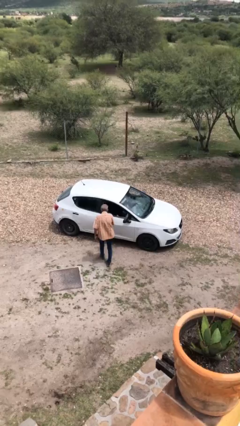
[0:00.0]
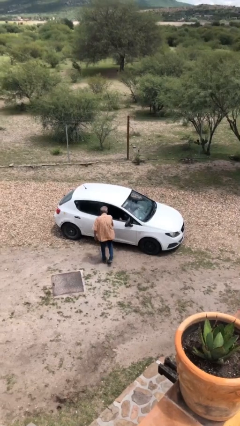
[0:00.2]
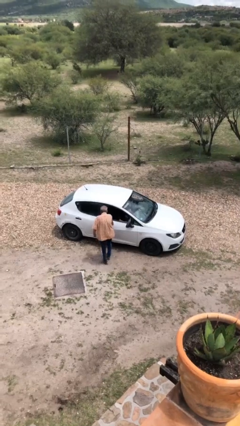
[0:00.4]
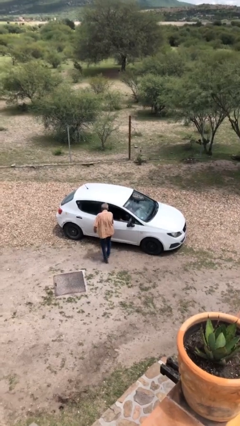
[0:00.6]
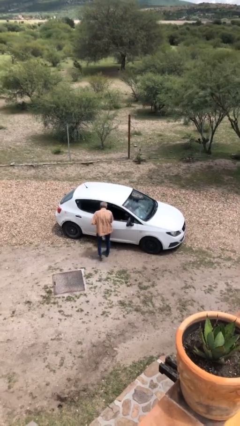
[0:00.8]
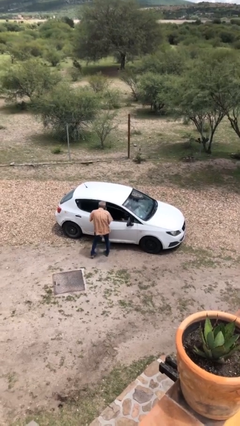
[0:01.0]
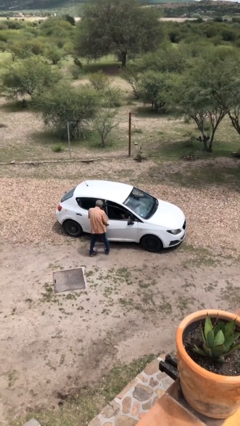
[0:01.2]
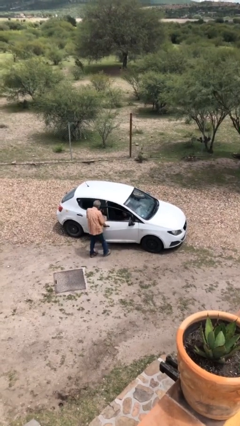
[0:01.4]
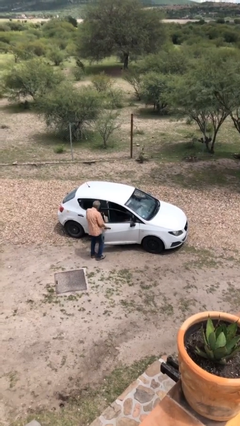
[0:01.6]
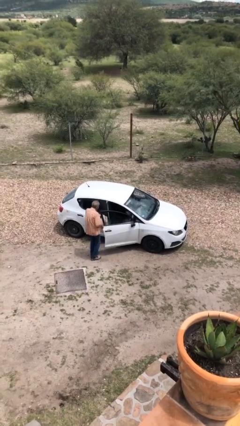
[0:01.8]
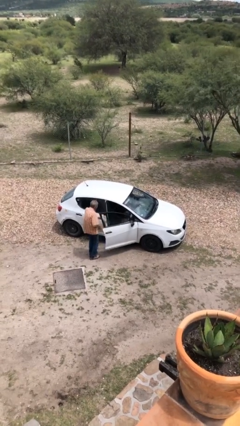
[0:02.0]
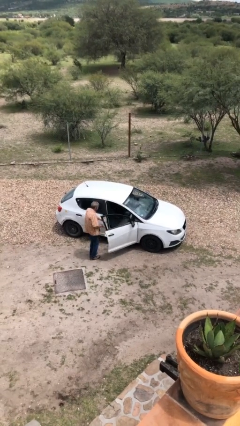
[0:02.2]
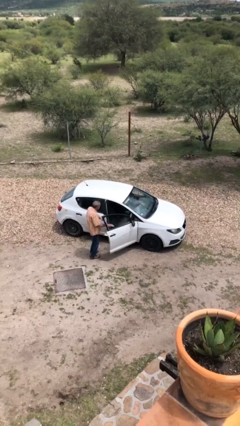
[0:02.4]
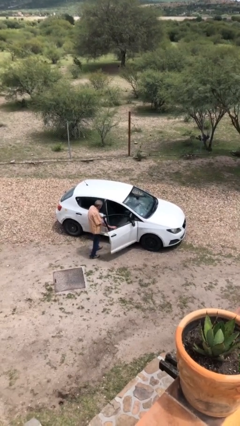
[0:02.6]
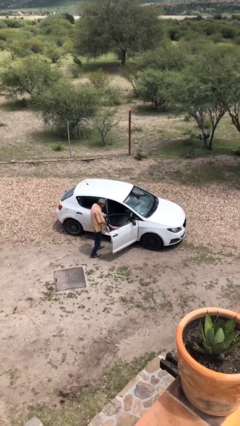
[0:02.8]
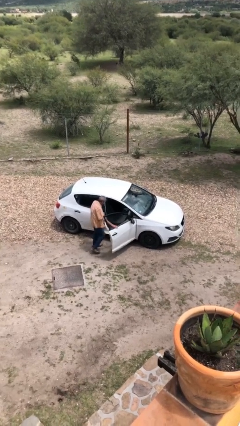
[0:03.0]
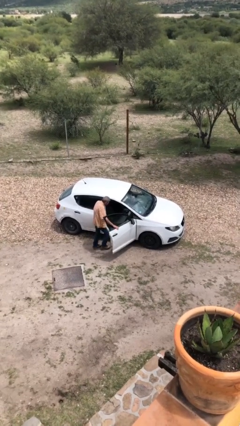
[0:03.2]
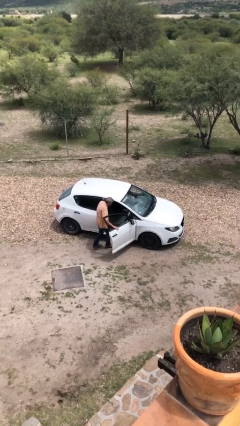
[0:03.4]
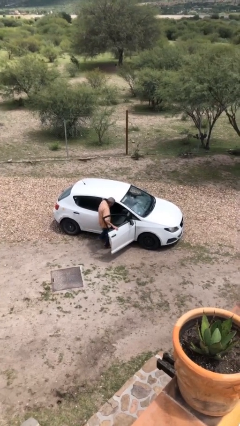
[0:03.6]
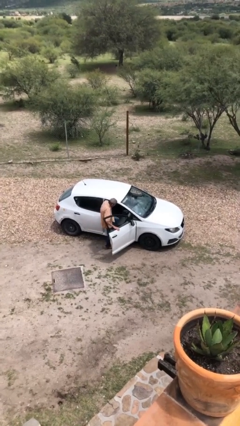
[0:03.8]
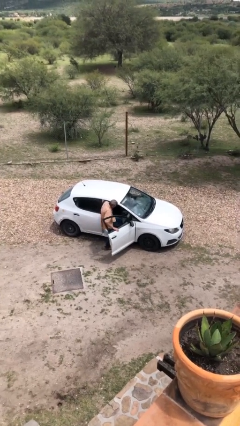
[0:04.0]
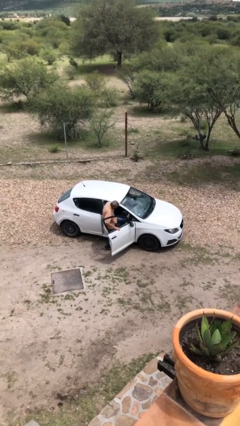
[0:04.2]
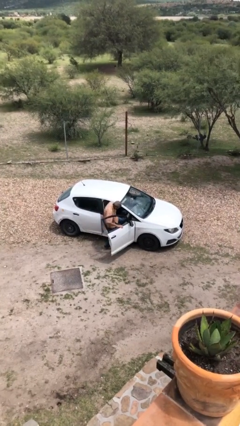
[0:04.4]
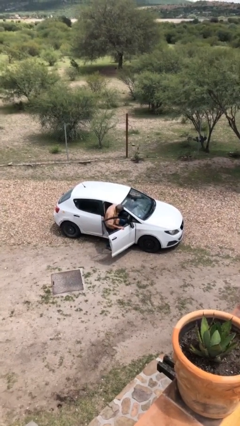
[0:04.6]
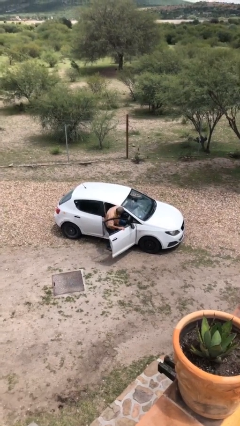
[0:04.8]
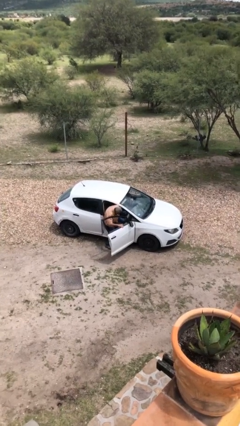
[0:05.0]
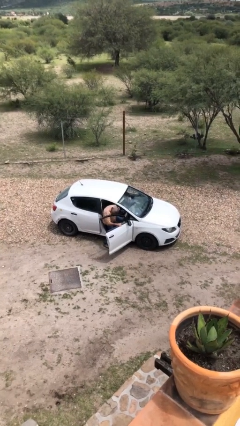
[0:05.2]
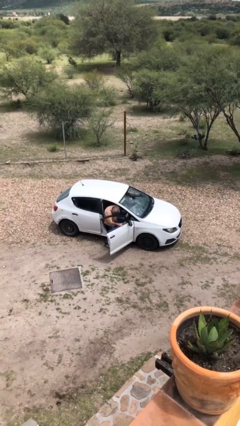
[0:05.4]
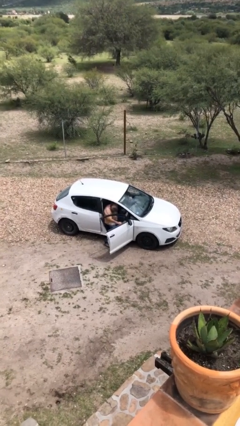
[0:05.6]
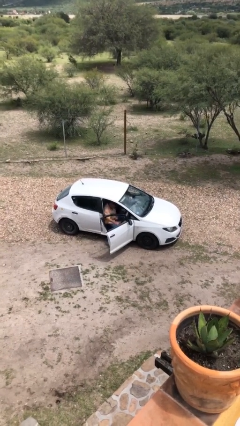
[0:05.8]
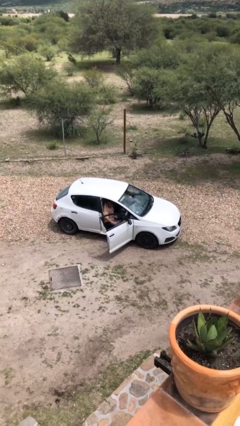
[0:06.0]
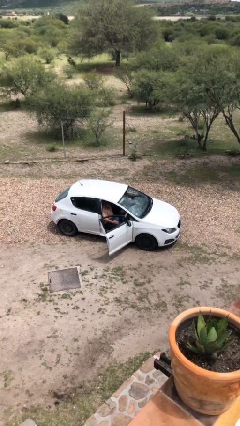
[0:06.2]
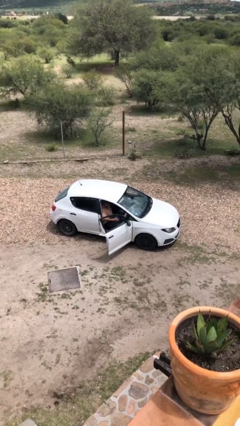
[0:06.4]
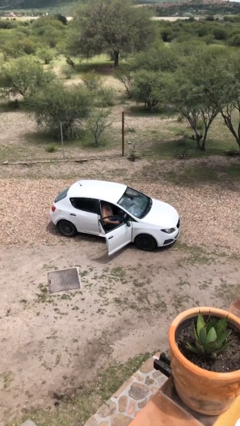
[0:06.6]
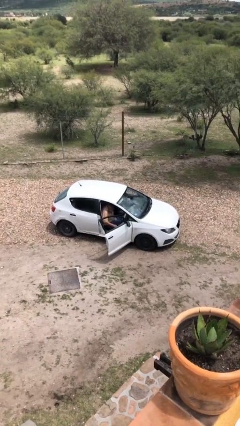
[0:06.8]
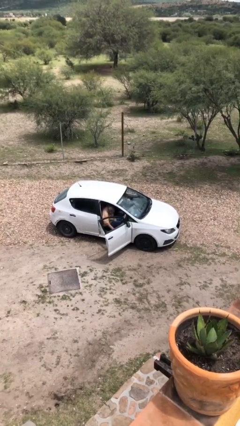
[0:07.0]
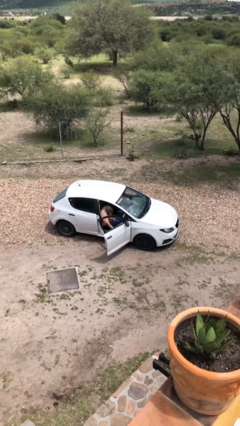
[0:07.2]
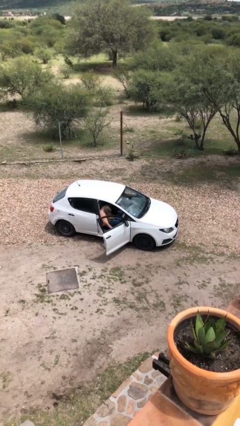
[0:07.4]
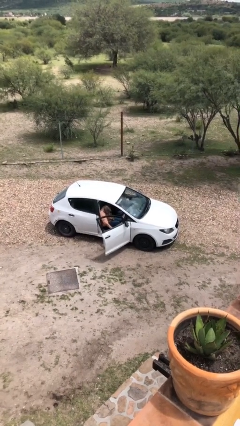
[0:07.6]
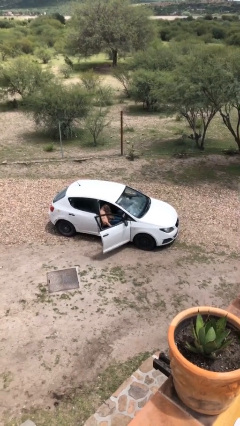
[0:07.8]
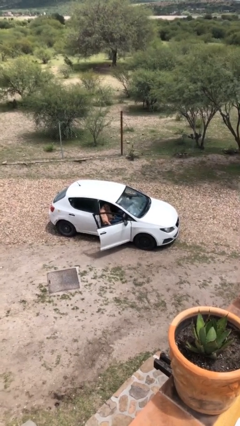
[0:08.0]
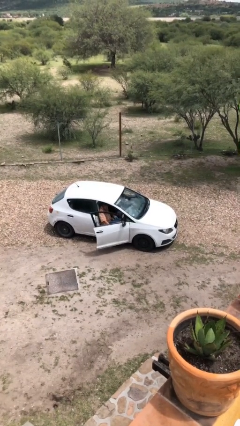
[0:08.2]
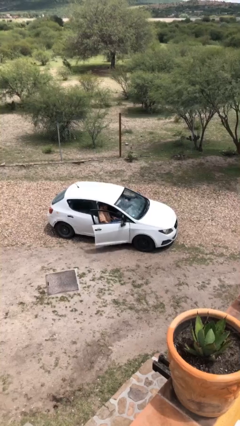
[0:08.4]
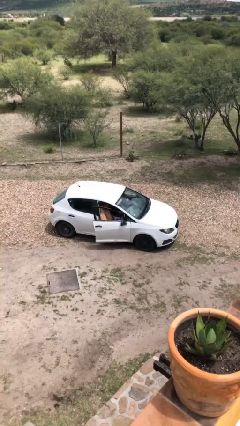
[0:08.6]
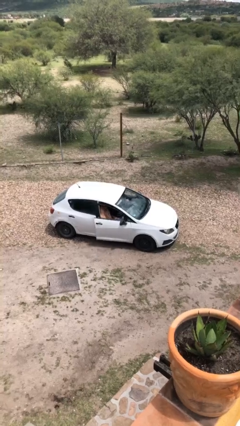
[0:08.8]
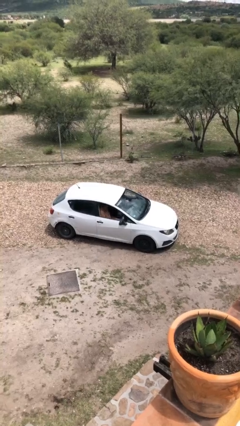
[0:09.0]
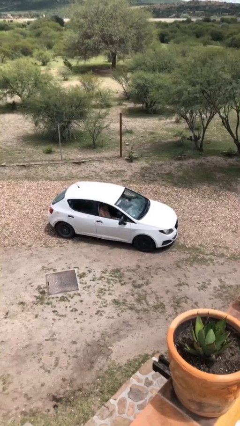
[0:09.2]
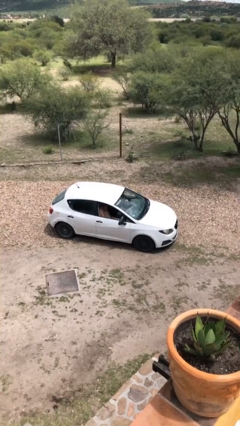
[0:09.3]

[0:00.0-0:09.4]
car picks up person

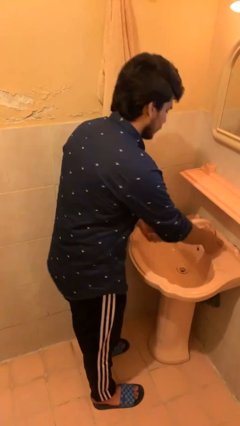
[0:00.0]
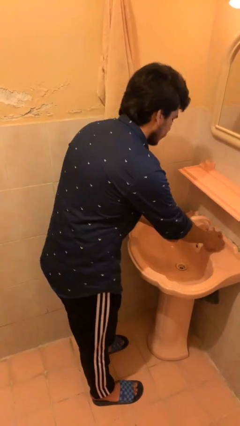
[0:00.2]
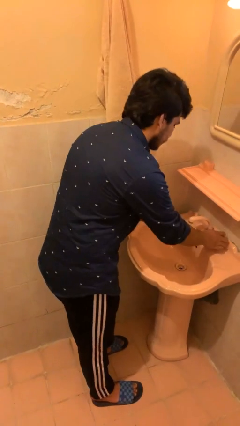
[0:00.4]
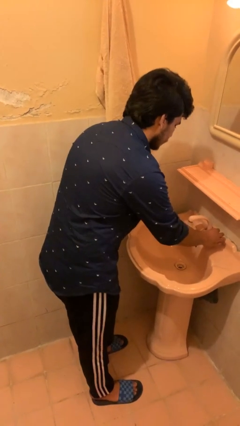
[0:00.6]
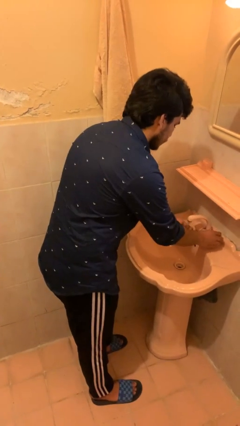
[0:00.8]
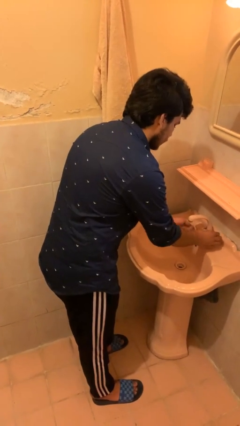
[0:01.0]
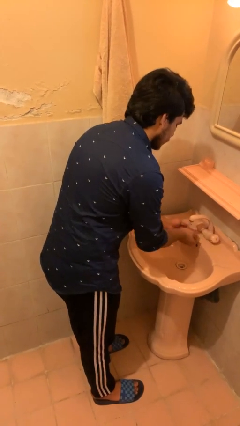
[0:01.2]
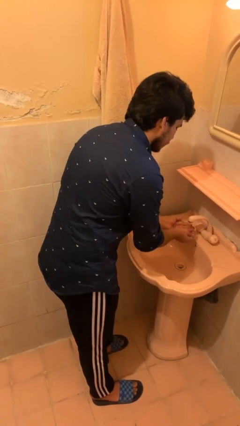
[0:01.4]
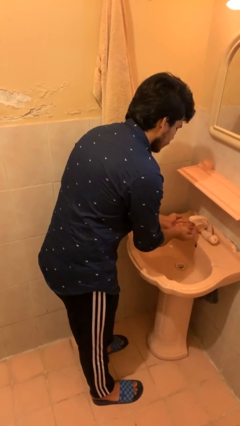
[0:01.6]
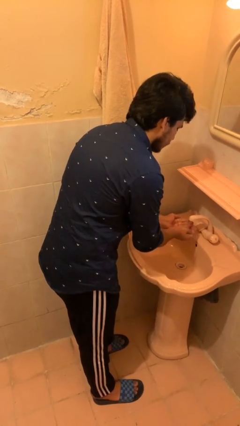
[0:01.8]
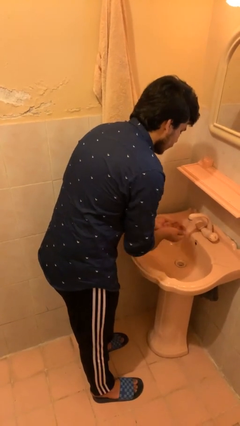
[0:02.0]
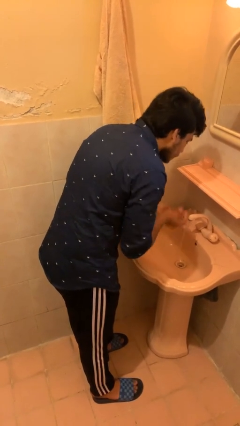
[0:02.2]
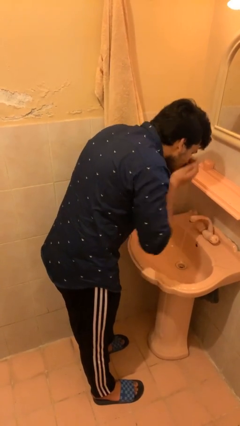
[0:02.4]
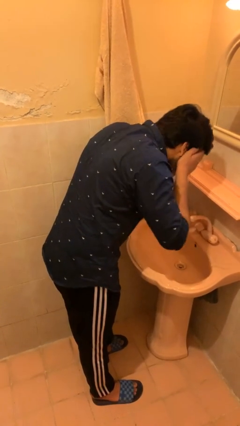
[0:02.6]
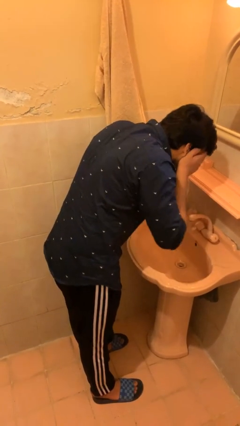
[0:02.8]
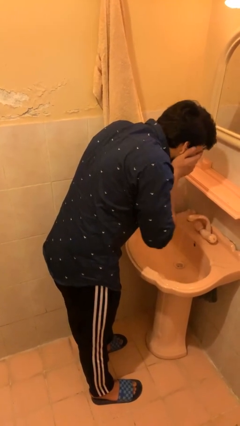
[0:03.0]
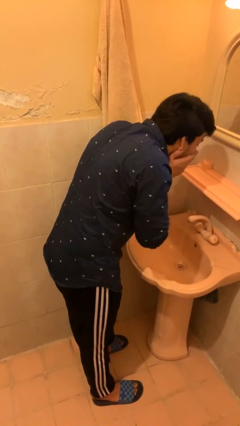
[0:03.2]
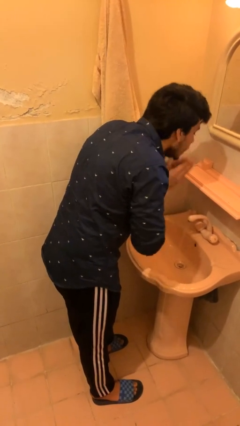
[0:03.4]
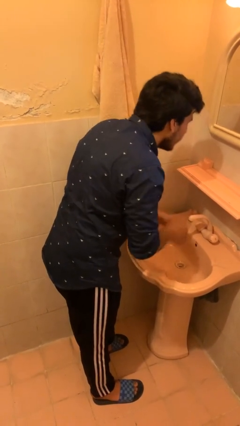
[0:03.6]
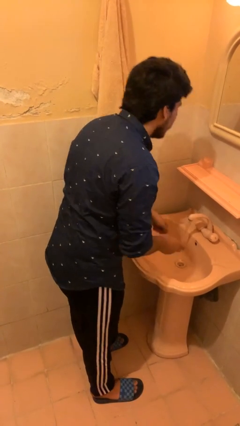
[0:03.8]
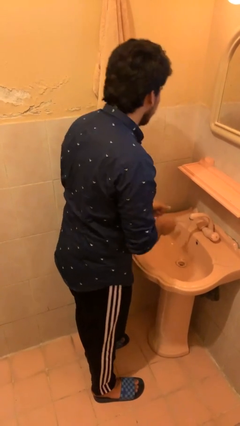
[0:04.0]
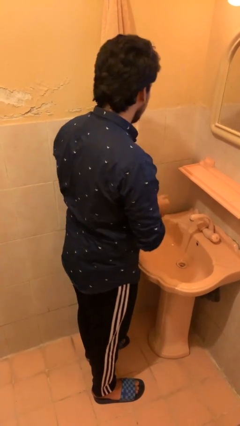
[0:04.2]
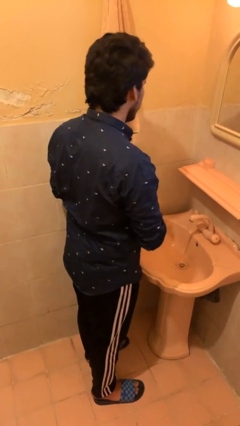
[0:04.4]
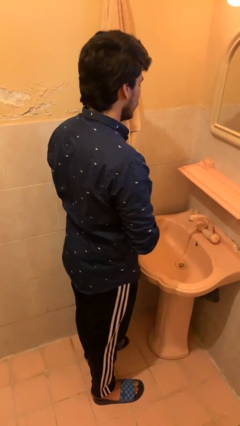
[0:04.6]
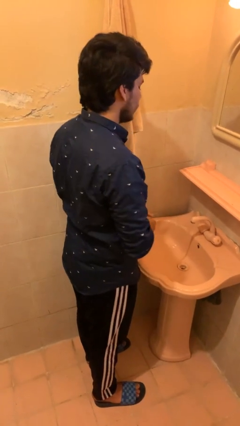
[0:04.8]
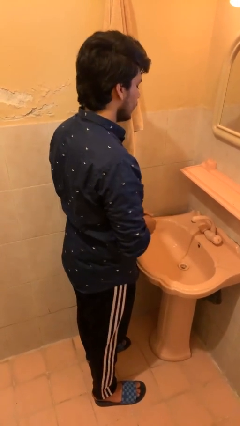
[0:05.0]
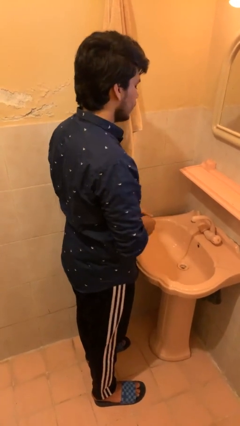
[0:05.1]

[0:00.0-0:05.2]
person washes face

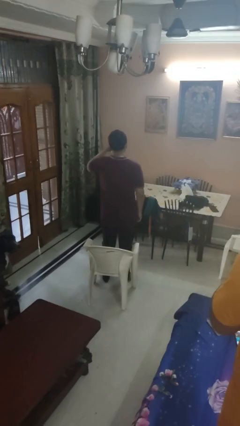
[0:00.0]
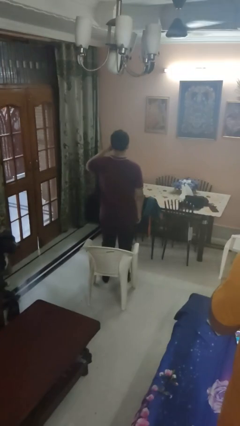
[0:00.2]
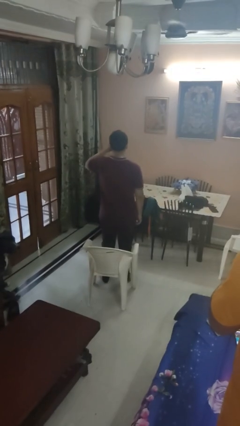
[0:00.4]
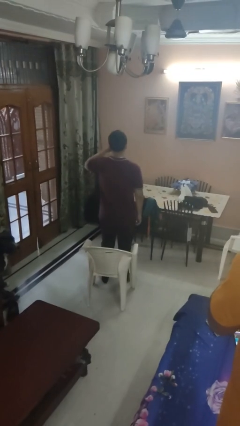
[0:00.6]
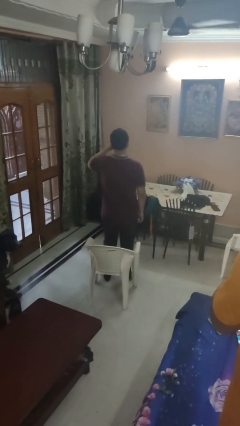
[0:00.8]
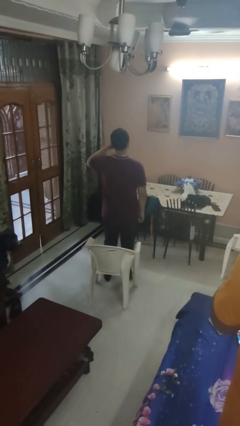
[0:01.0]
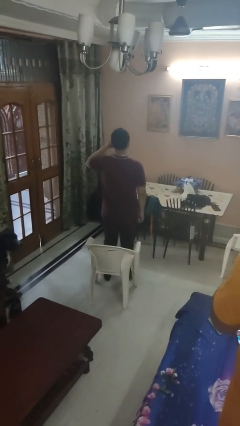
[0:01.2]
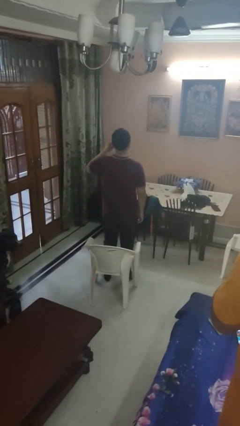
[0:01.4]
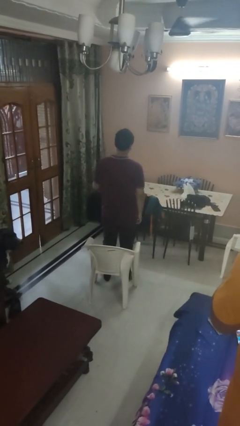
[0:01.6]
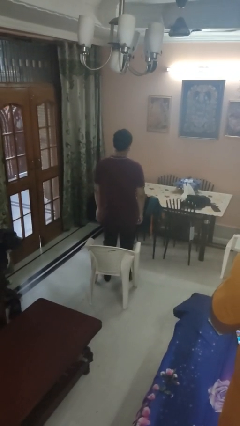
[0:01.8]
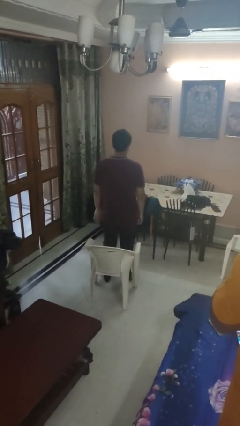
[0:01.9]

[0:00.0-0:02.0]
person rubs eyes

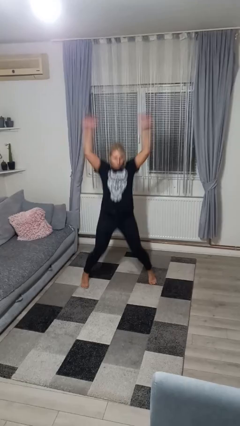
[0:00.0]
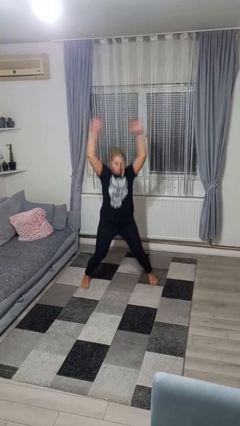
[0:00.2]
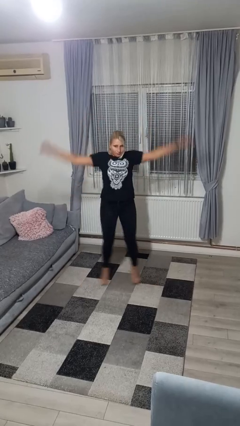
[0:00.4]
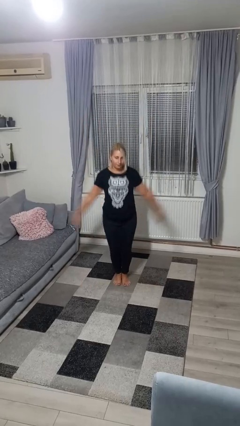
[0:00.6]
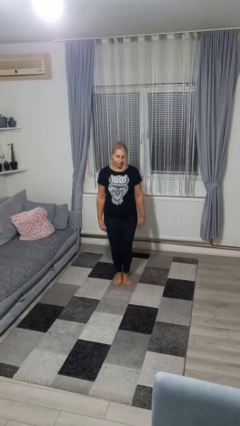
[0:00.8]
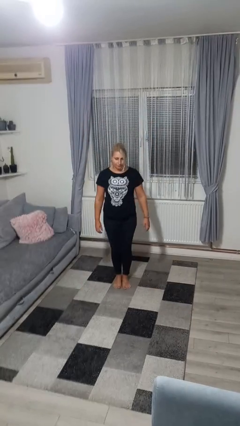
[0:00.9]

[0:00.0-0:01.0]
person exercises with jumping jacks

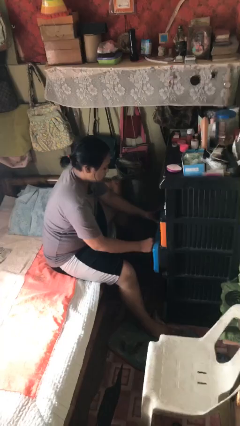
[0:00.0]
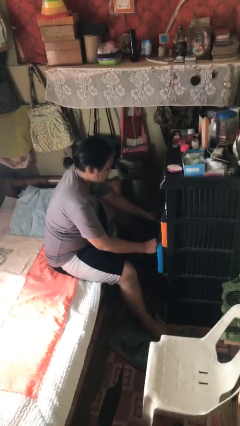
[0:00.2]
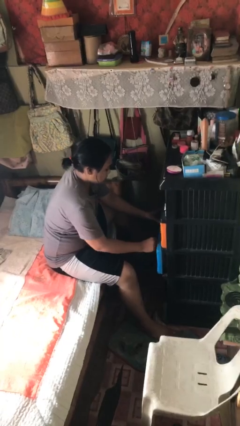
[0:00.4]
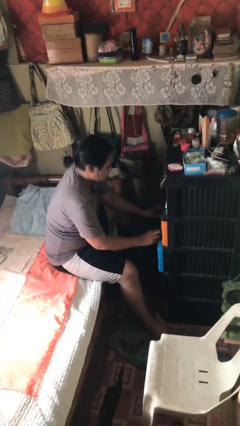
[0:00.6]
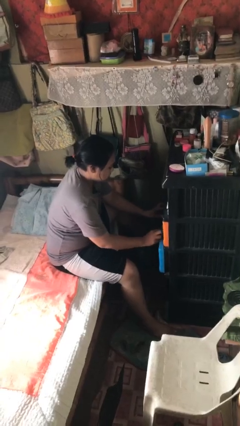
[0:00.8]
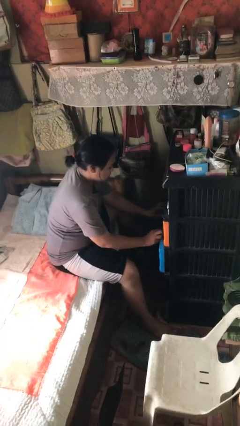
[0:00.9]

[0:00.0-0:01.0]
person closes dresser drawer
